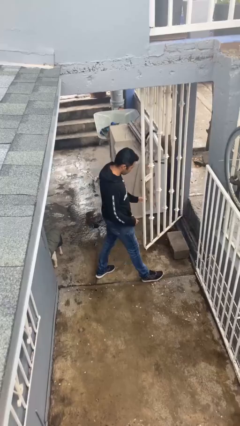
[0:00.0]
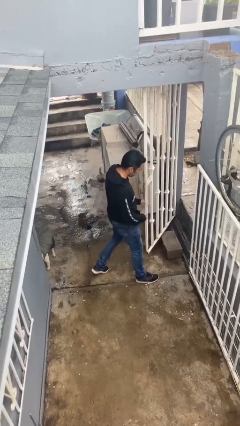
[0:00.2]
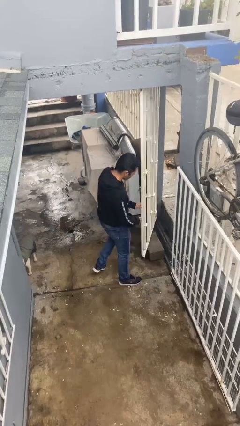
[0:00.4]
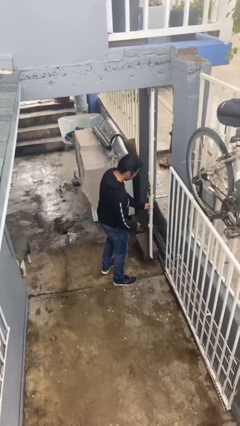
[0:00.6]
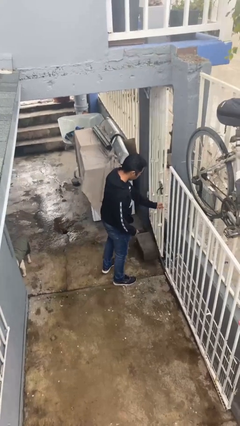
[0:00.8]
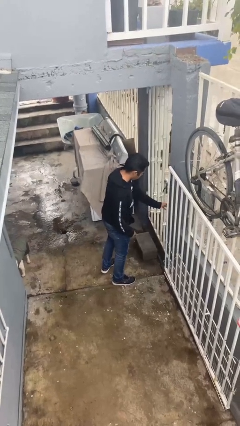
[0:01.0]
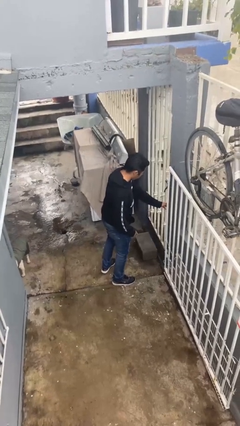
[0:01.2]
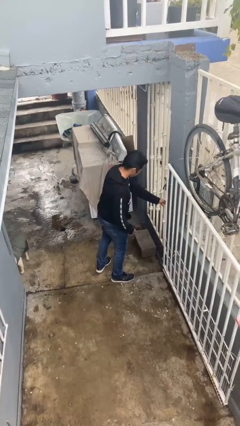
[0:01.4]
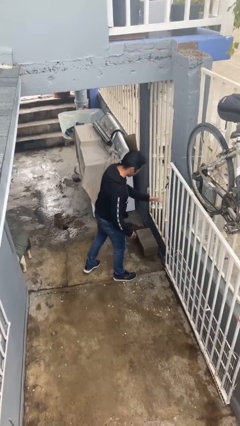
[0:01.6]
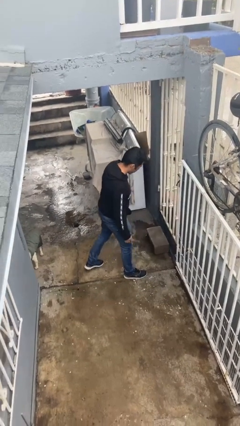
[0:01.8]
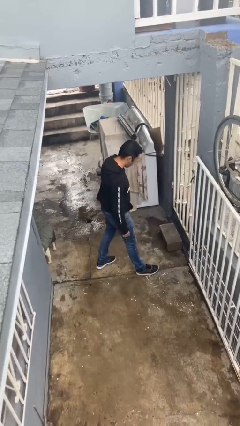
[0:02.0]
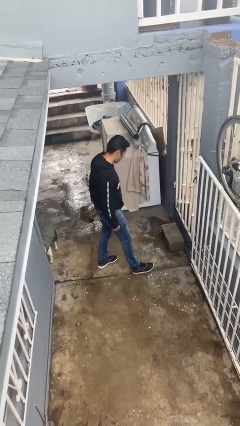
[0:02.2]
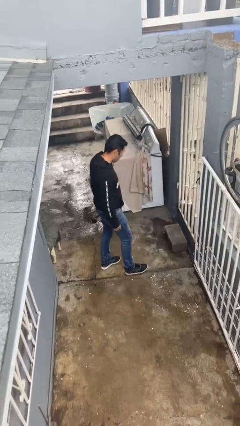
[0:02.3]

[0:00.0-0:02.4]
person closes facility door

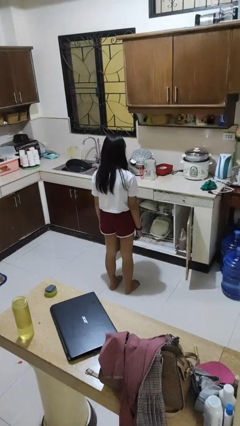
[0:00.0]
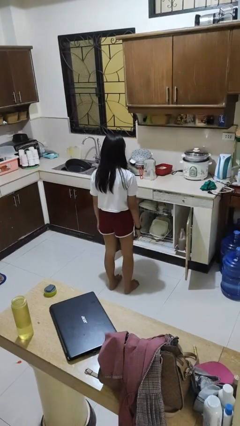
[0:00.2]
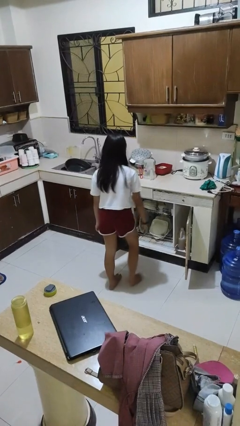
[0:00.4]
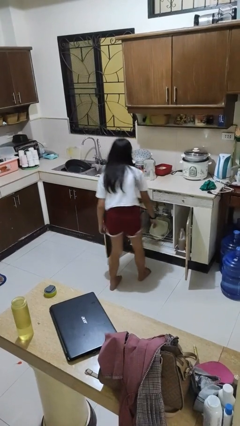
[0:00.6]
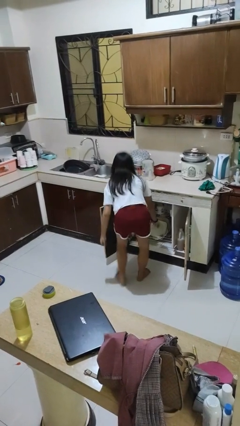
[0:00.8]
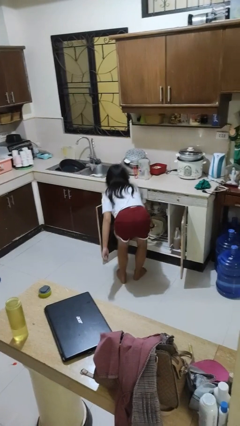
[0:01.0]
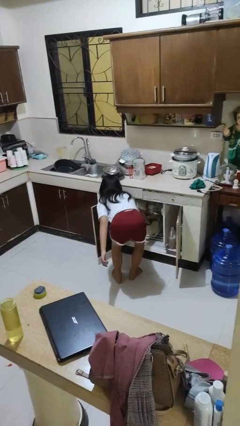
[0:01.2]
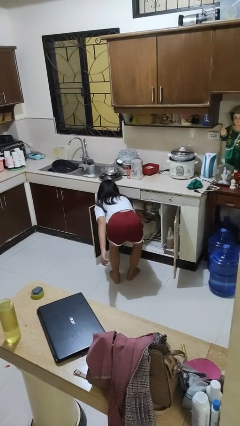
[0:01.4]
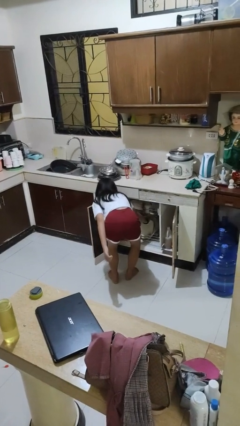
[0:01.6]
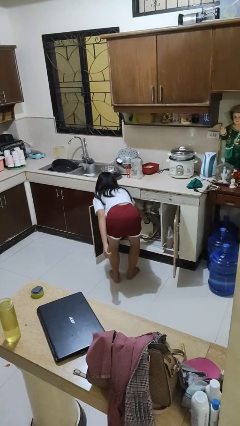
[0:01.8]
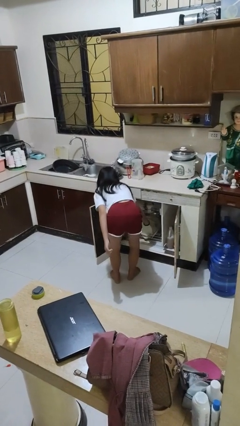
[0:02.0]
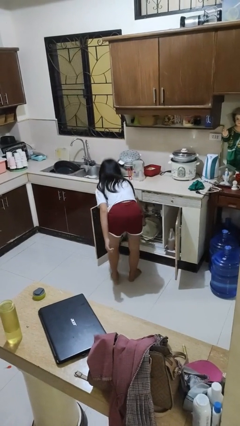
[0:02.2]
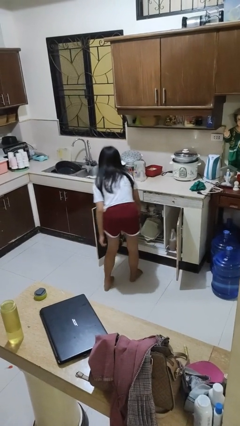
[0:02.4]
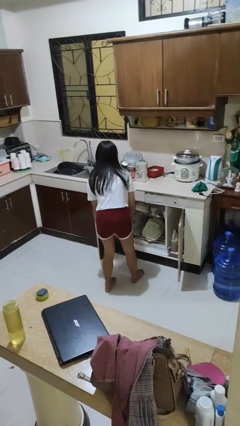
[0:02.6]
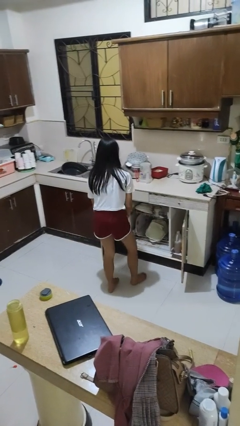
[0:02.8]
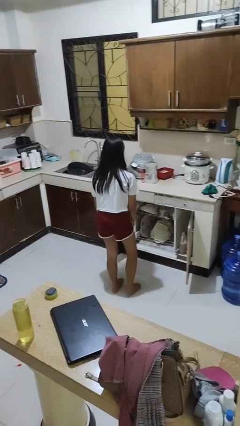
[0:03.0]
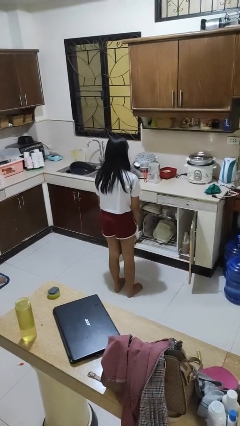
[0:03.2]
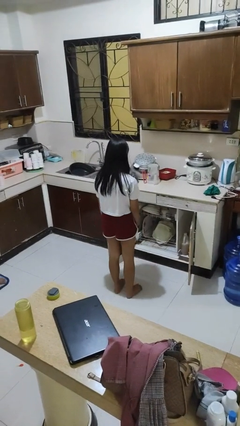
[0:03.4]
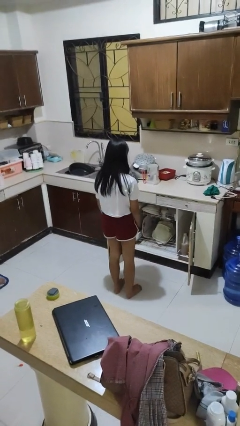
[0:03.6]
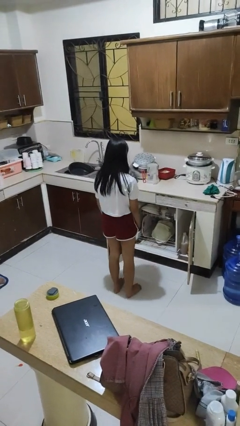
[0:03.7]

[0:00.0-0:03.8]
person unloads dishwasher

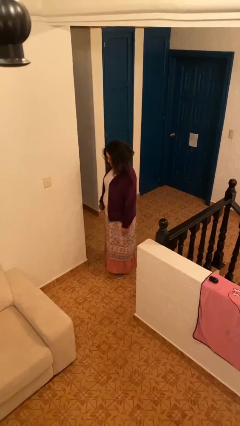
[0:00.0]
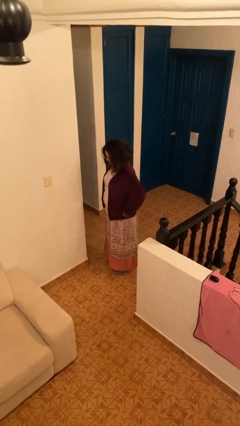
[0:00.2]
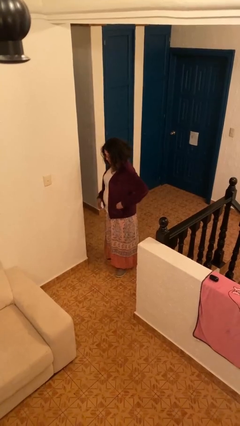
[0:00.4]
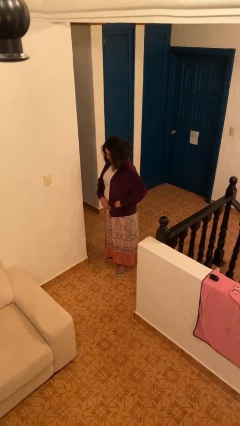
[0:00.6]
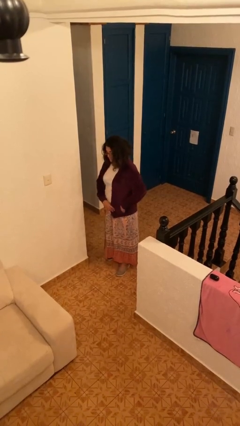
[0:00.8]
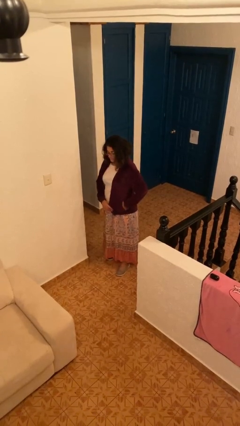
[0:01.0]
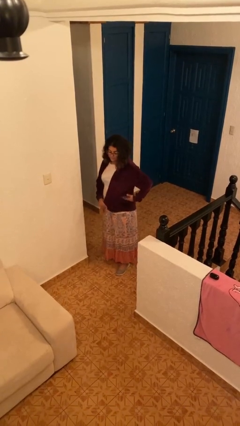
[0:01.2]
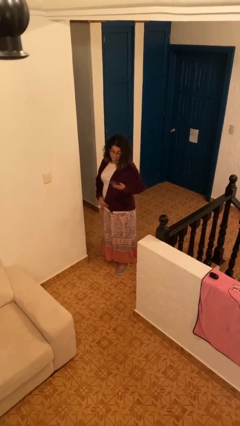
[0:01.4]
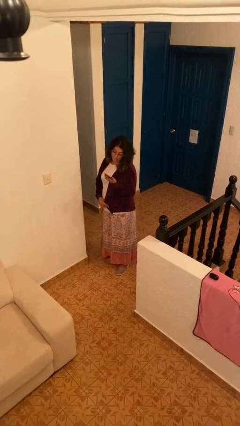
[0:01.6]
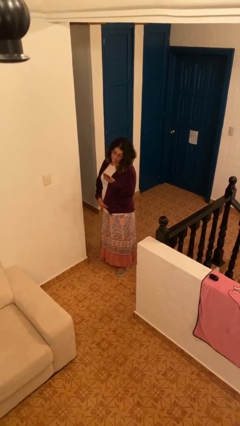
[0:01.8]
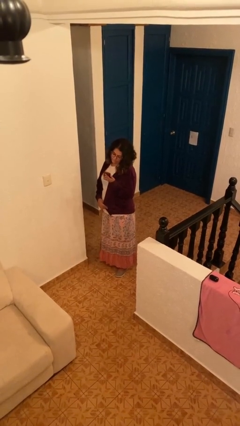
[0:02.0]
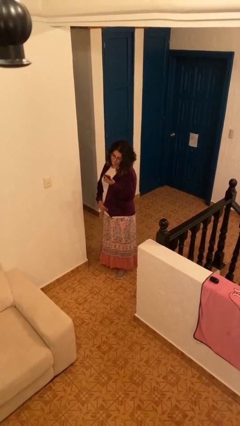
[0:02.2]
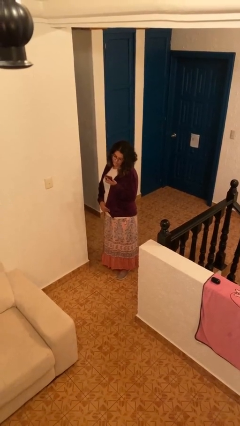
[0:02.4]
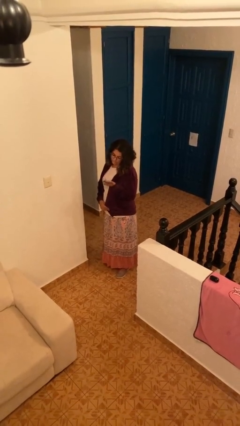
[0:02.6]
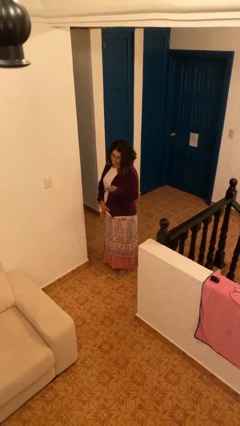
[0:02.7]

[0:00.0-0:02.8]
person takes phone from pocket

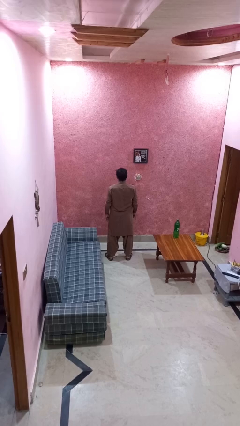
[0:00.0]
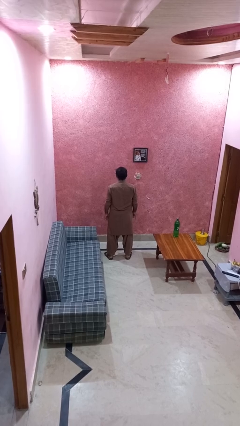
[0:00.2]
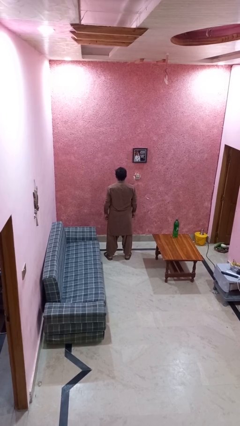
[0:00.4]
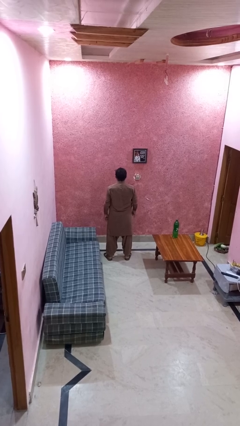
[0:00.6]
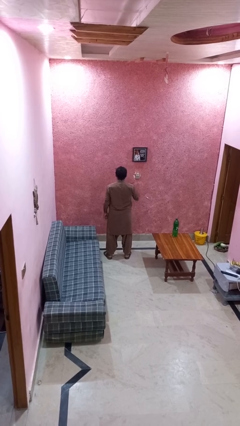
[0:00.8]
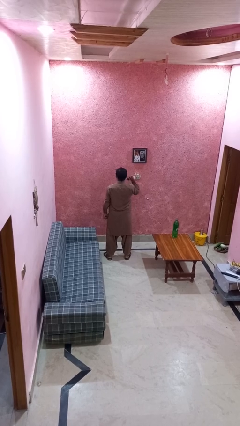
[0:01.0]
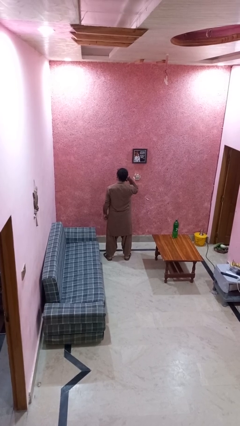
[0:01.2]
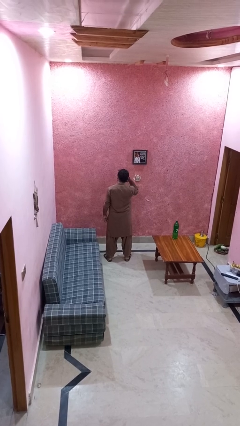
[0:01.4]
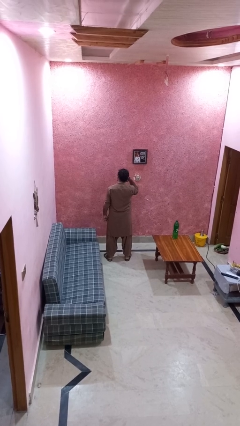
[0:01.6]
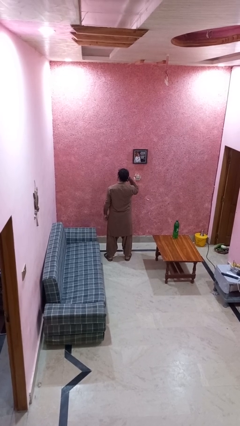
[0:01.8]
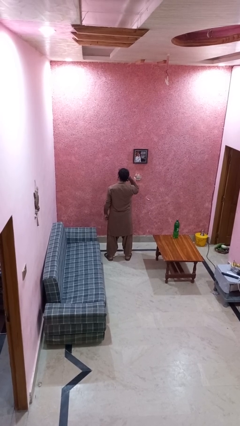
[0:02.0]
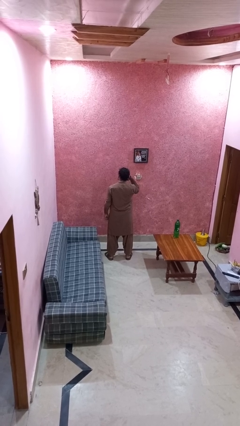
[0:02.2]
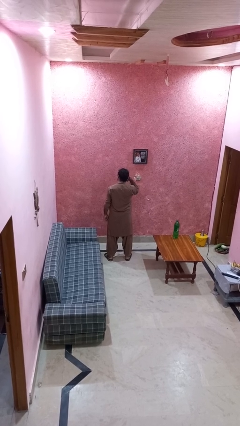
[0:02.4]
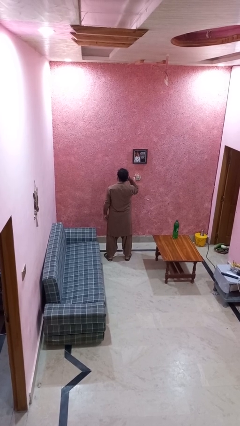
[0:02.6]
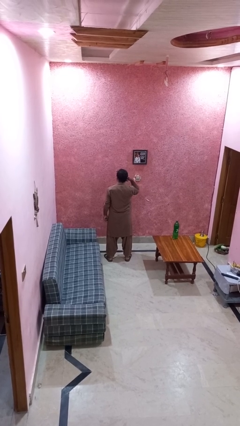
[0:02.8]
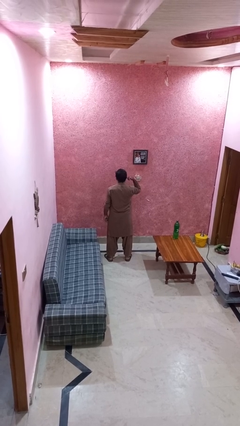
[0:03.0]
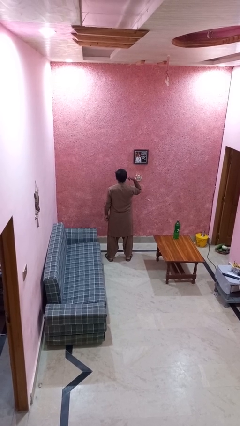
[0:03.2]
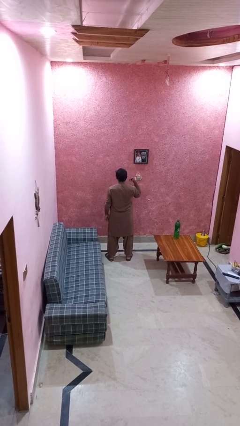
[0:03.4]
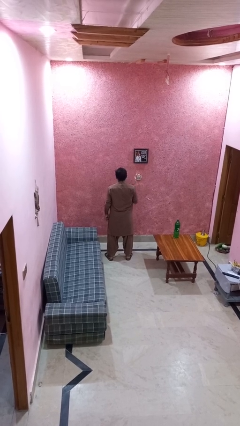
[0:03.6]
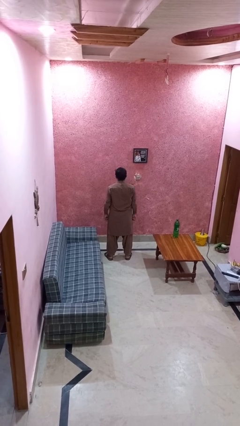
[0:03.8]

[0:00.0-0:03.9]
person gestures call me

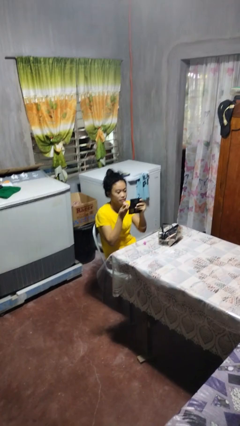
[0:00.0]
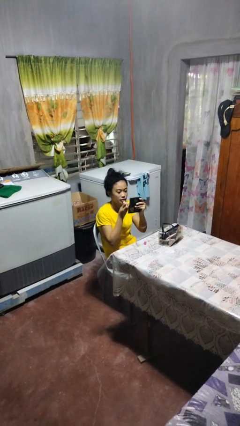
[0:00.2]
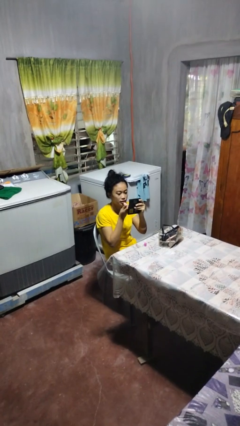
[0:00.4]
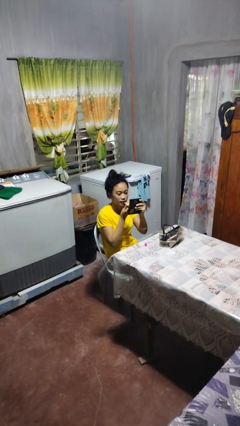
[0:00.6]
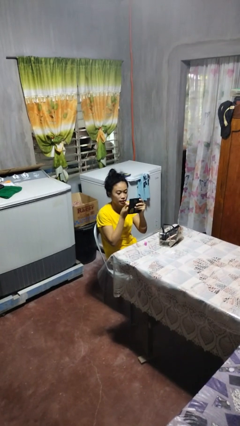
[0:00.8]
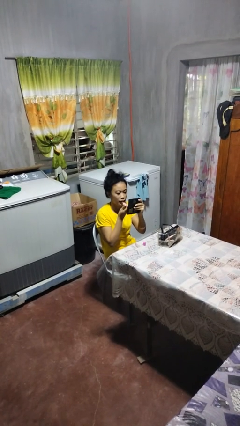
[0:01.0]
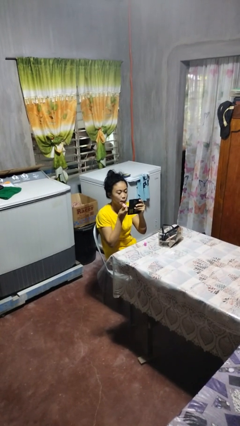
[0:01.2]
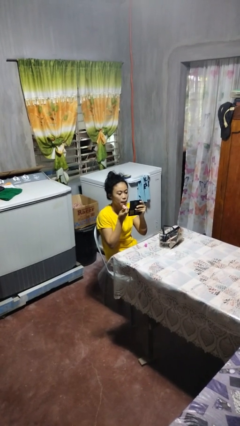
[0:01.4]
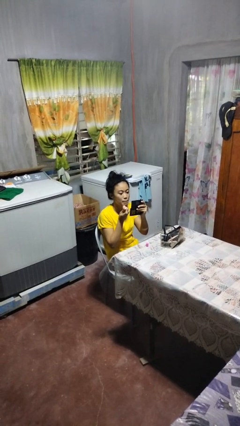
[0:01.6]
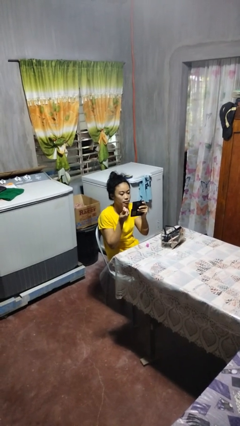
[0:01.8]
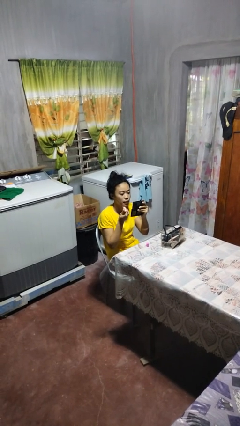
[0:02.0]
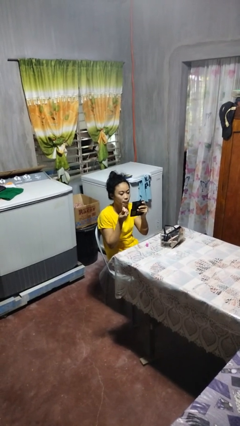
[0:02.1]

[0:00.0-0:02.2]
person applies lip makeup

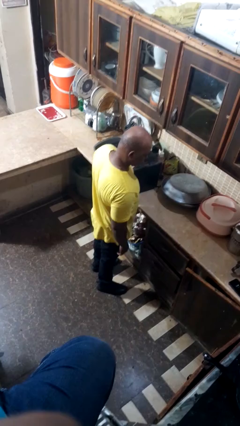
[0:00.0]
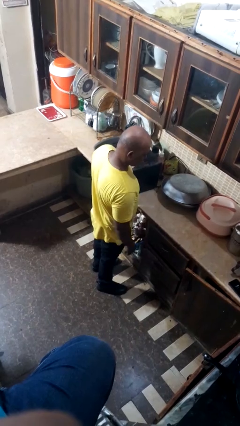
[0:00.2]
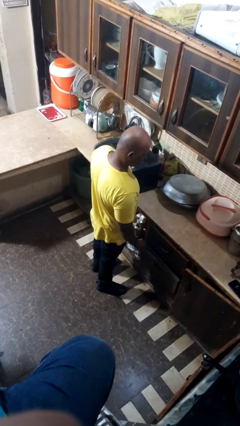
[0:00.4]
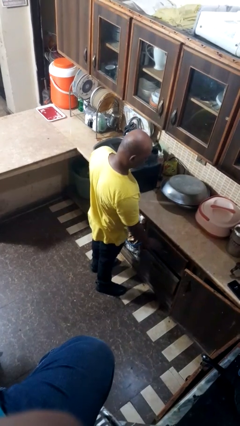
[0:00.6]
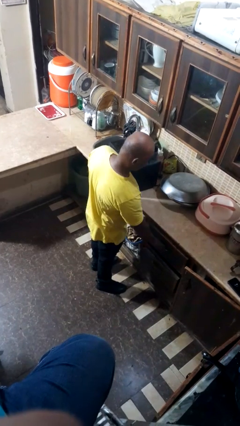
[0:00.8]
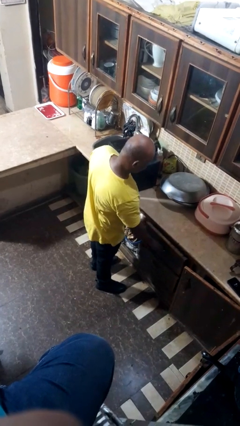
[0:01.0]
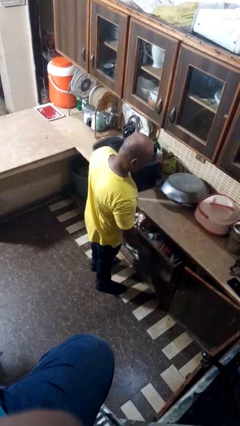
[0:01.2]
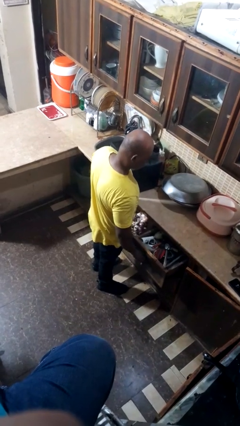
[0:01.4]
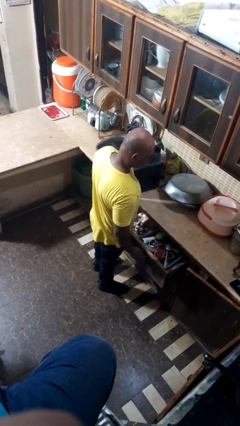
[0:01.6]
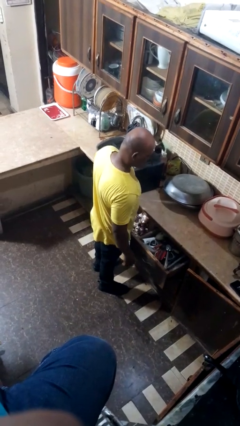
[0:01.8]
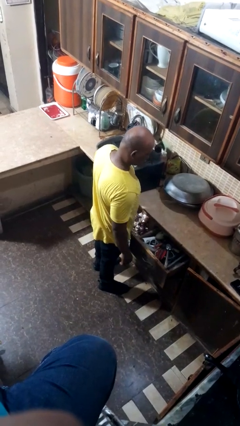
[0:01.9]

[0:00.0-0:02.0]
person opens dresser drawer

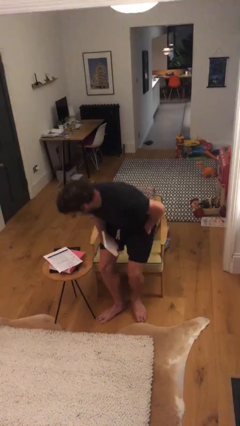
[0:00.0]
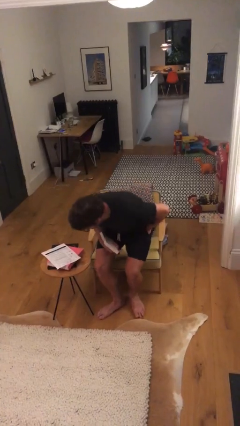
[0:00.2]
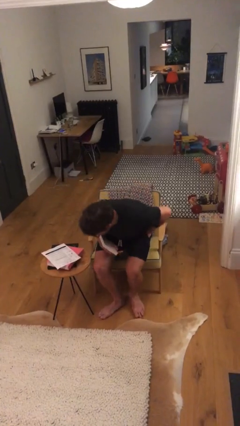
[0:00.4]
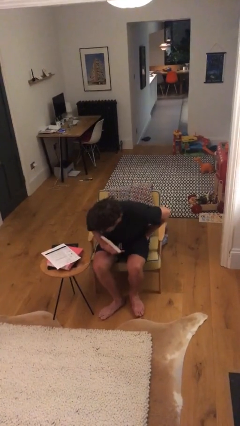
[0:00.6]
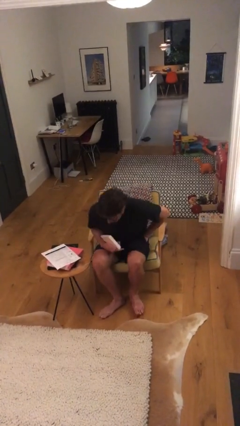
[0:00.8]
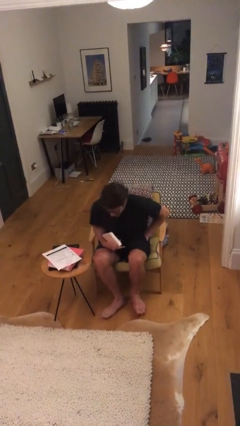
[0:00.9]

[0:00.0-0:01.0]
person sits down
